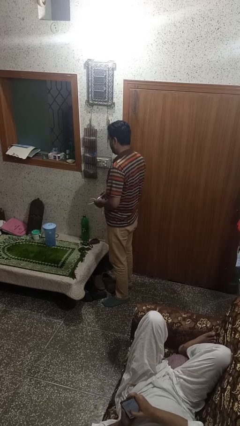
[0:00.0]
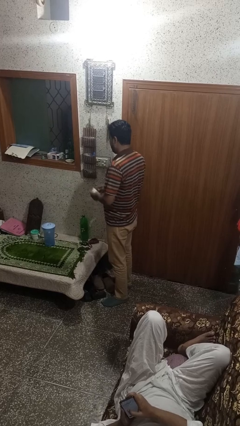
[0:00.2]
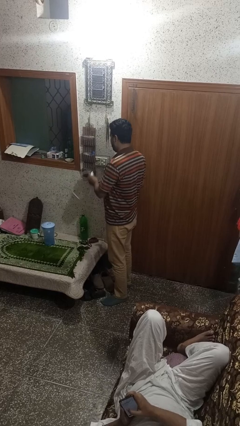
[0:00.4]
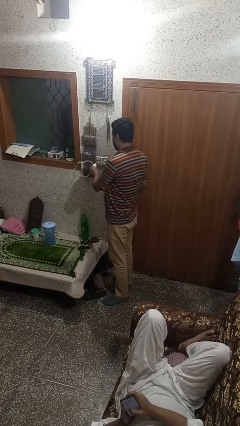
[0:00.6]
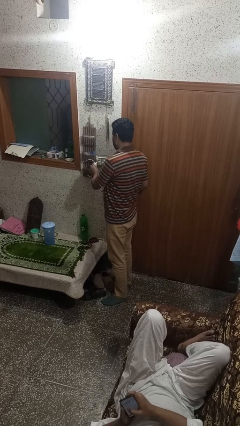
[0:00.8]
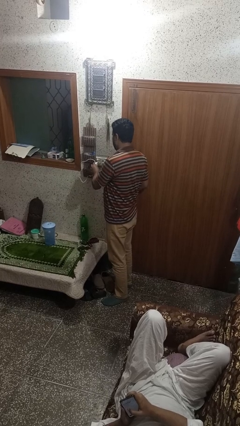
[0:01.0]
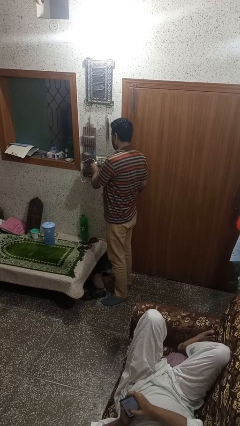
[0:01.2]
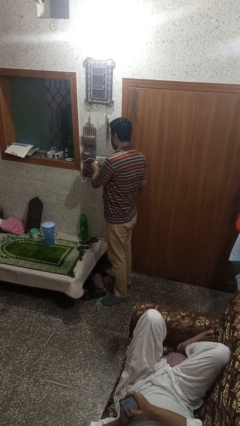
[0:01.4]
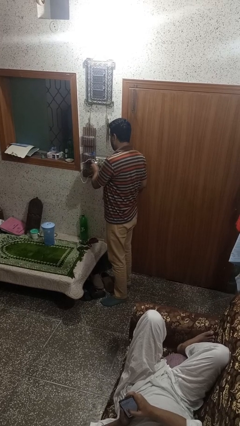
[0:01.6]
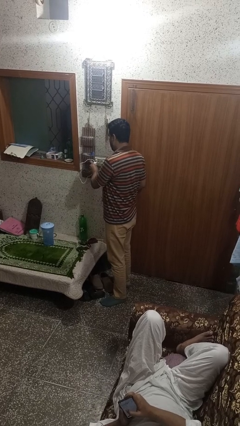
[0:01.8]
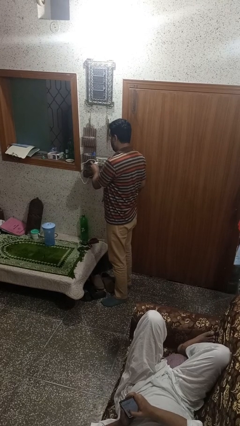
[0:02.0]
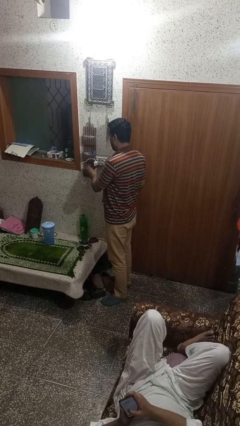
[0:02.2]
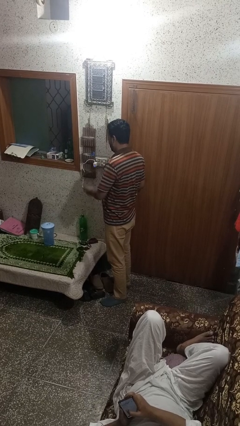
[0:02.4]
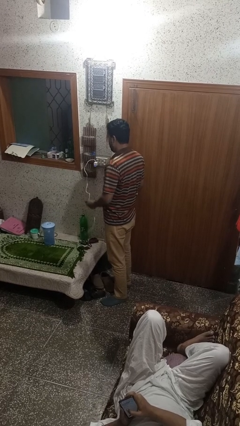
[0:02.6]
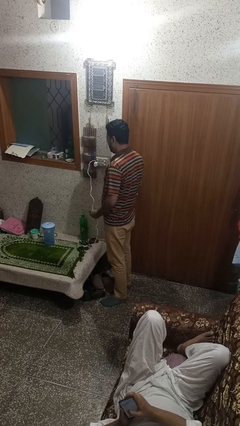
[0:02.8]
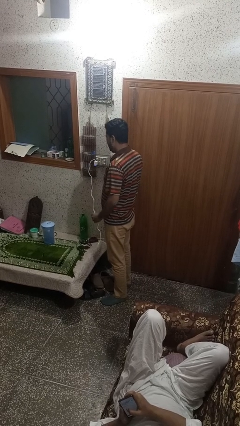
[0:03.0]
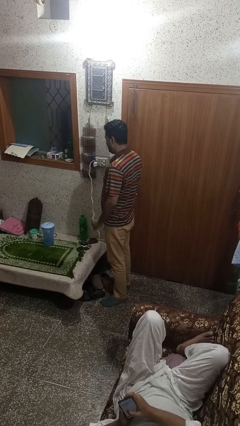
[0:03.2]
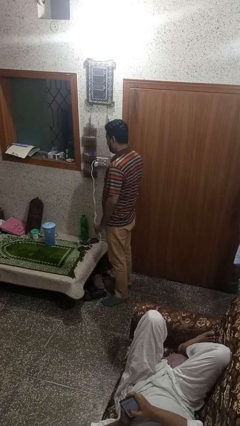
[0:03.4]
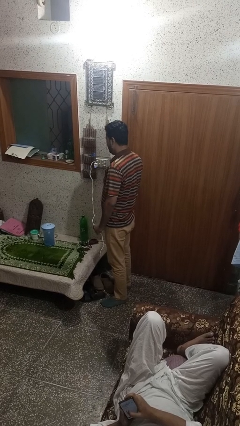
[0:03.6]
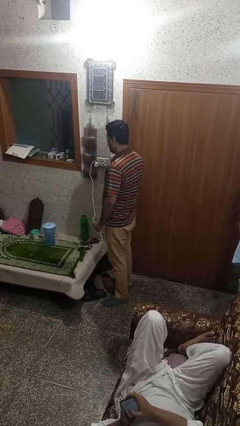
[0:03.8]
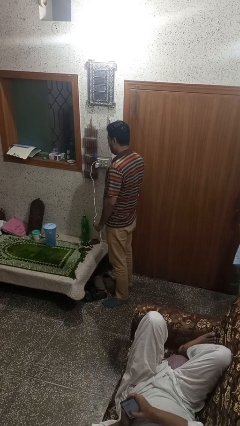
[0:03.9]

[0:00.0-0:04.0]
person plugs into electrical socket

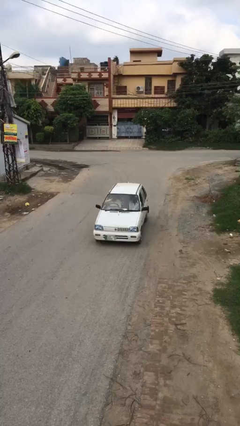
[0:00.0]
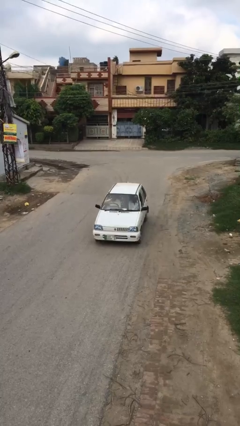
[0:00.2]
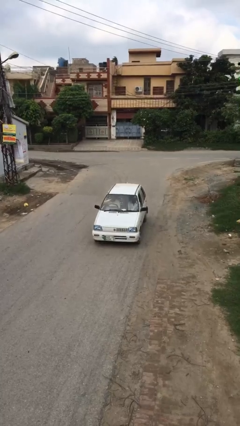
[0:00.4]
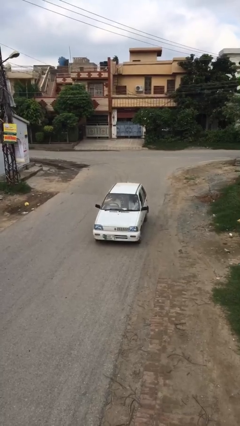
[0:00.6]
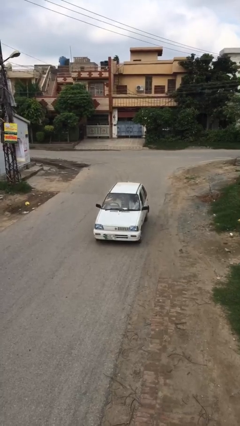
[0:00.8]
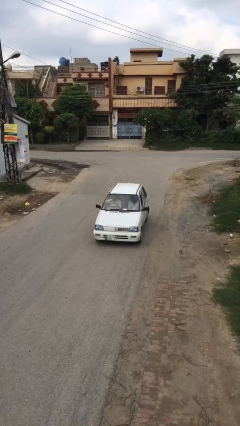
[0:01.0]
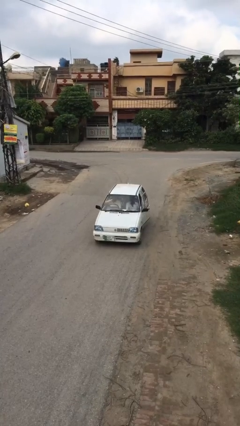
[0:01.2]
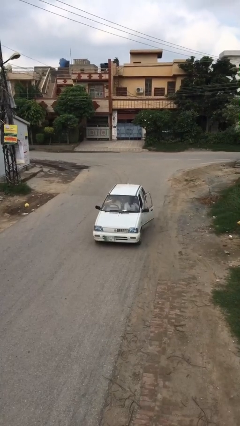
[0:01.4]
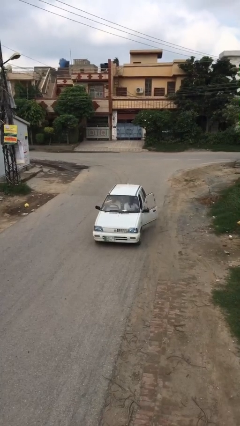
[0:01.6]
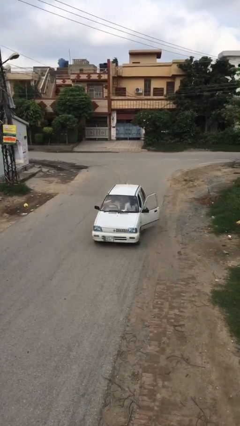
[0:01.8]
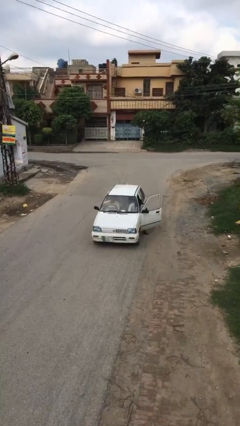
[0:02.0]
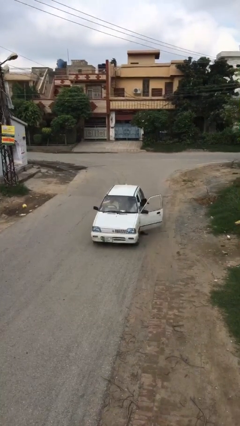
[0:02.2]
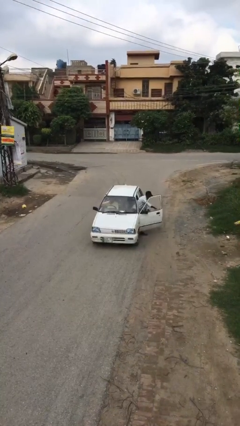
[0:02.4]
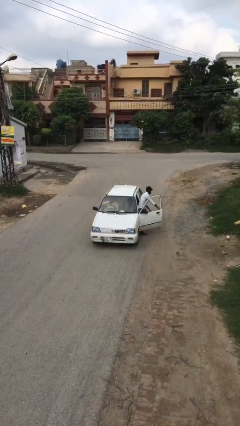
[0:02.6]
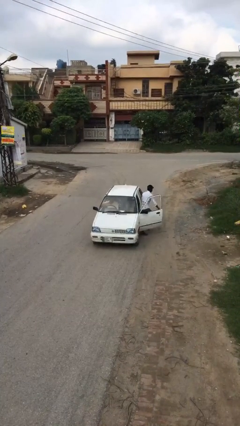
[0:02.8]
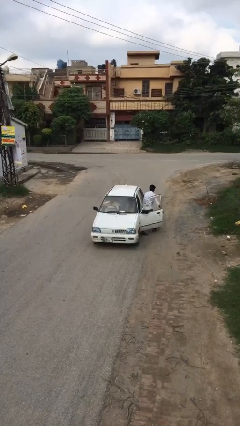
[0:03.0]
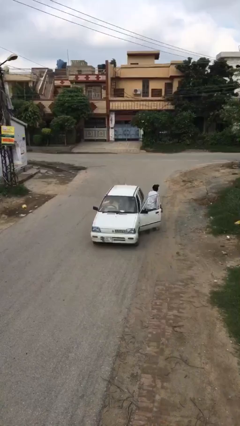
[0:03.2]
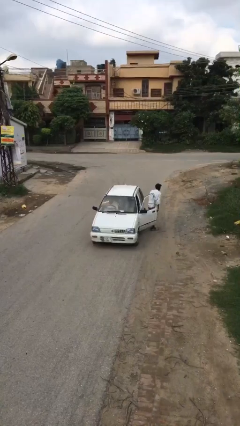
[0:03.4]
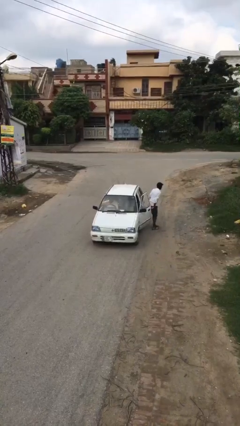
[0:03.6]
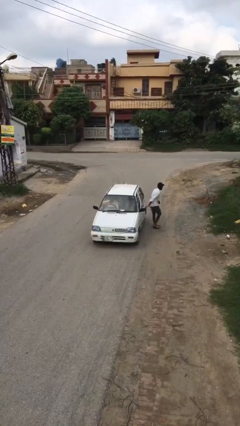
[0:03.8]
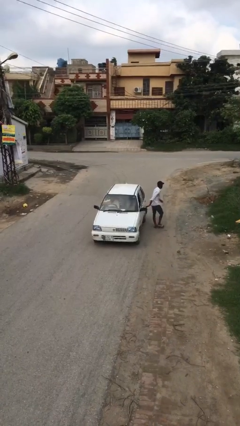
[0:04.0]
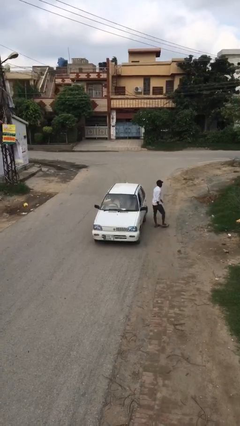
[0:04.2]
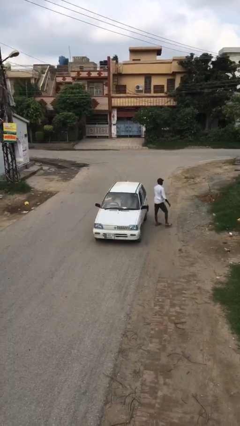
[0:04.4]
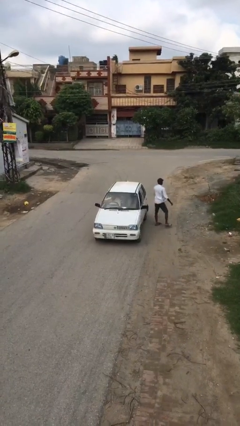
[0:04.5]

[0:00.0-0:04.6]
car drops off person

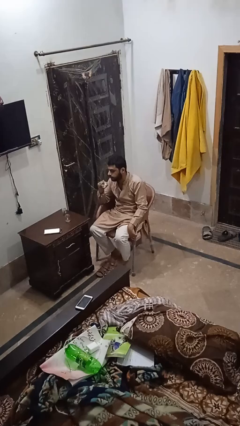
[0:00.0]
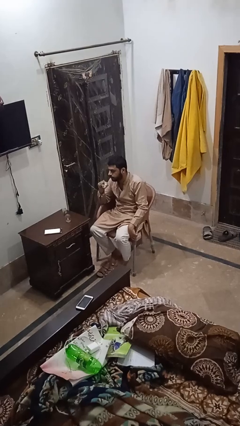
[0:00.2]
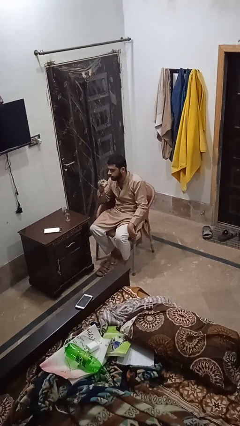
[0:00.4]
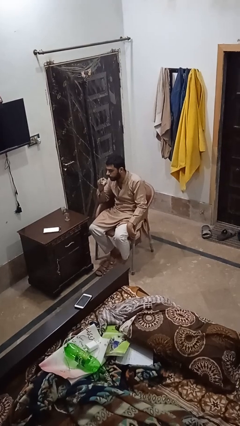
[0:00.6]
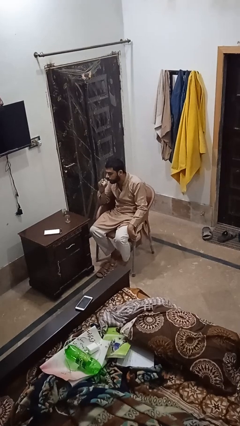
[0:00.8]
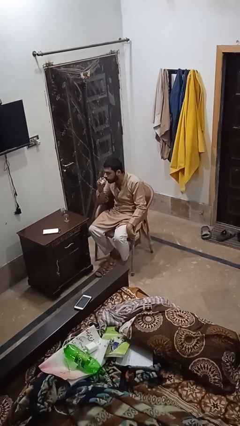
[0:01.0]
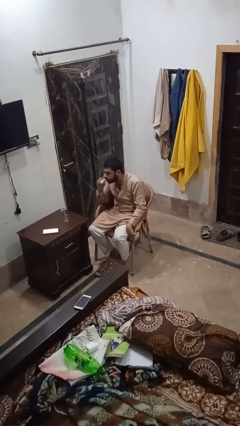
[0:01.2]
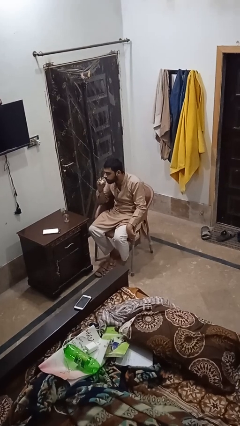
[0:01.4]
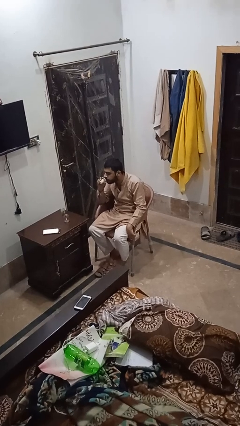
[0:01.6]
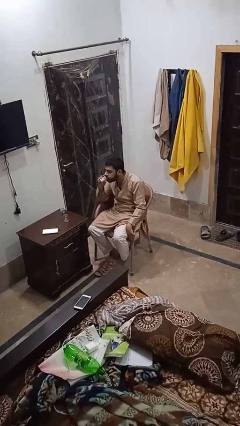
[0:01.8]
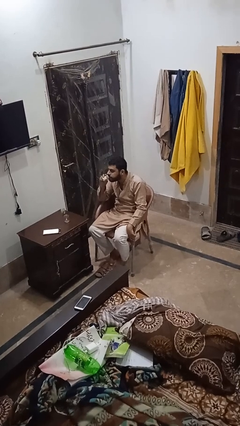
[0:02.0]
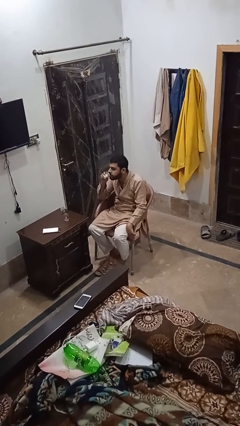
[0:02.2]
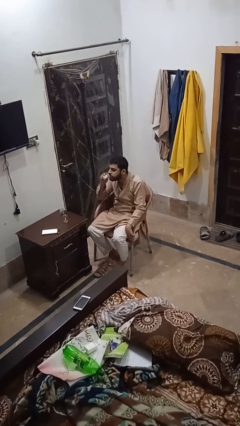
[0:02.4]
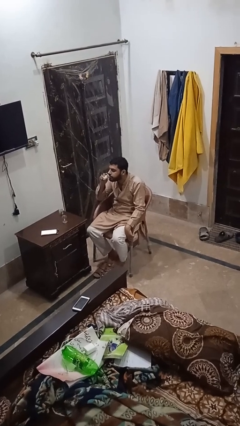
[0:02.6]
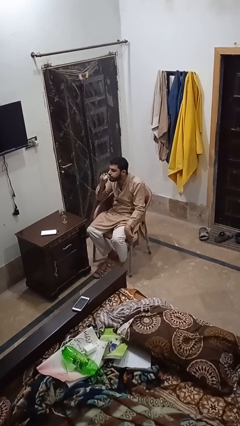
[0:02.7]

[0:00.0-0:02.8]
person drinks from shotglass

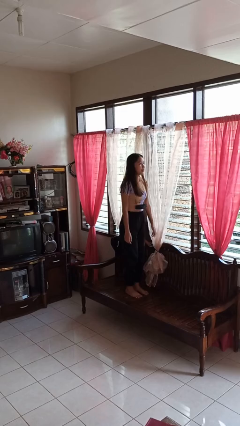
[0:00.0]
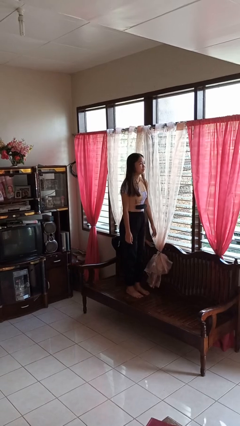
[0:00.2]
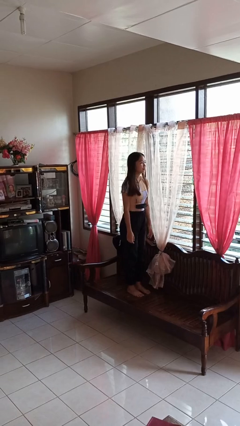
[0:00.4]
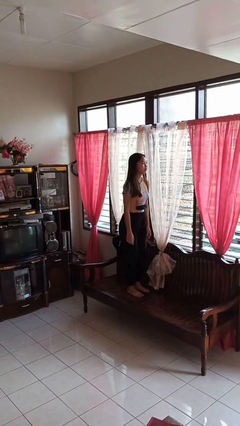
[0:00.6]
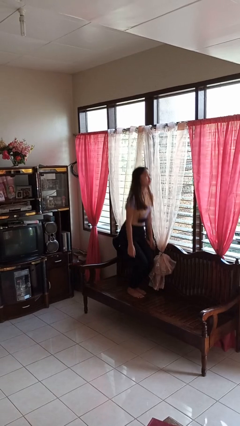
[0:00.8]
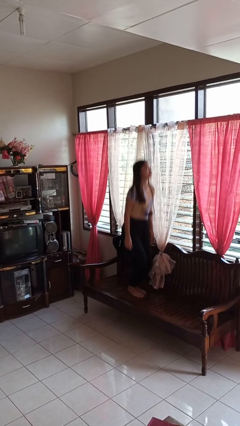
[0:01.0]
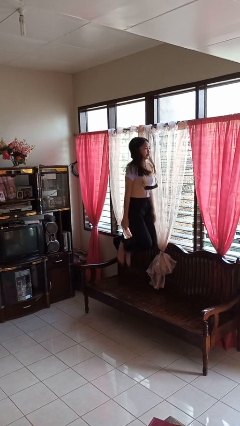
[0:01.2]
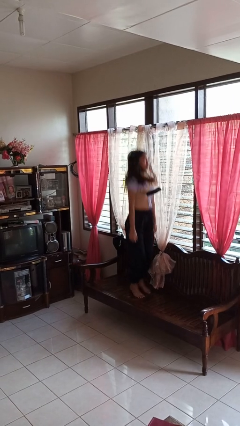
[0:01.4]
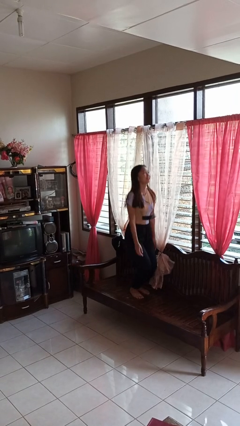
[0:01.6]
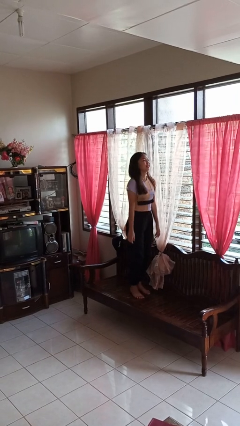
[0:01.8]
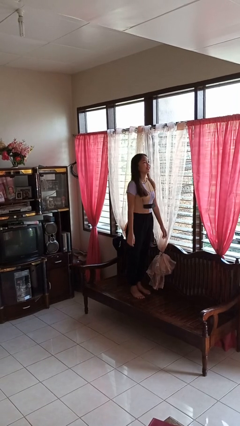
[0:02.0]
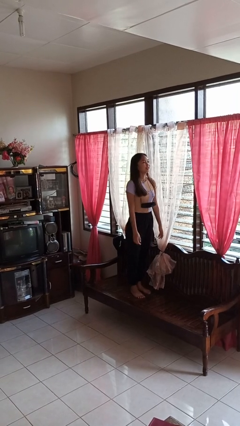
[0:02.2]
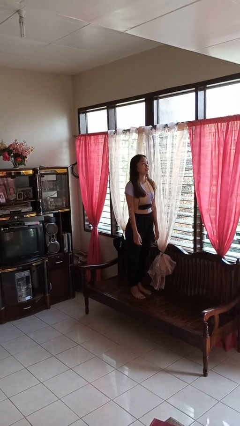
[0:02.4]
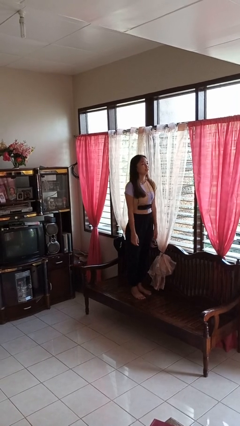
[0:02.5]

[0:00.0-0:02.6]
person jumps on couch

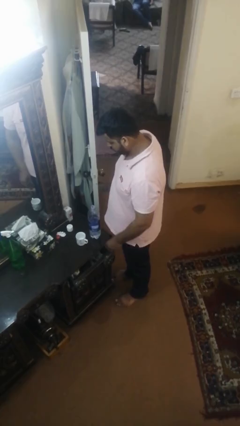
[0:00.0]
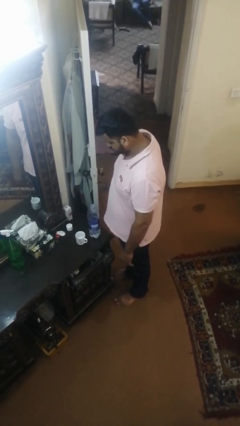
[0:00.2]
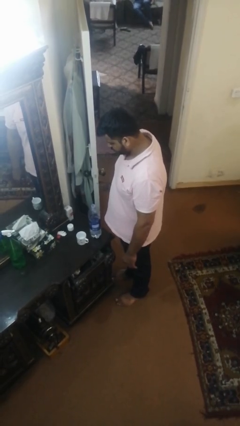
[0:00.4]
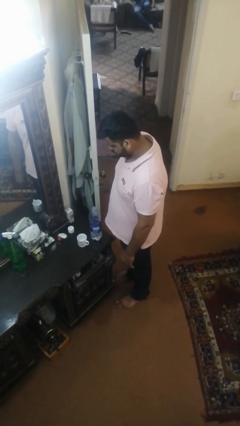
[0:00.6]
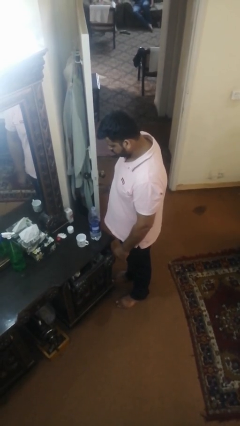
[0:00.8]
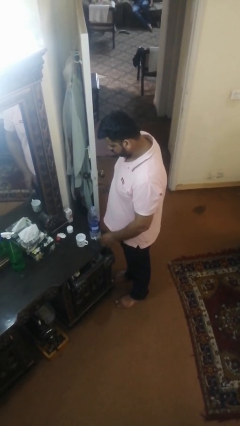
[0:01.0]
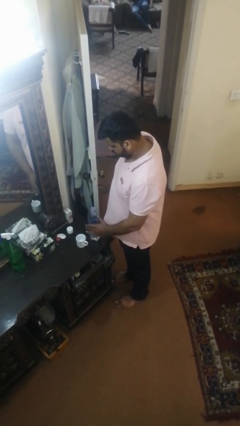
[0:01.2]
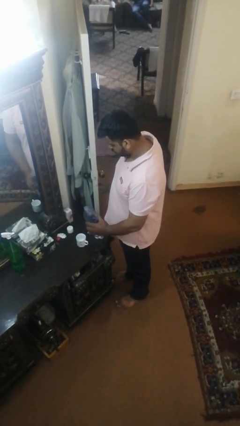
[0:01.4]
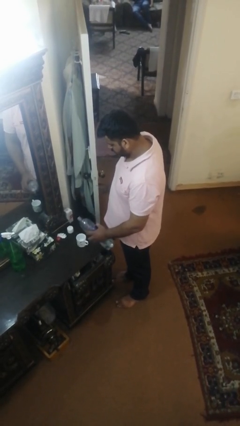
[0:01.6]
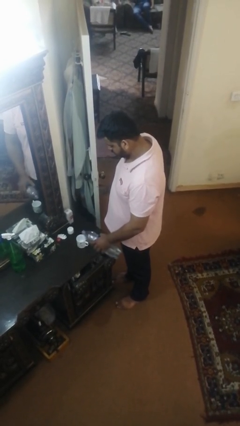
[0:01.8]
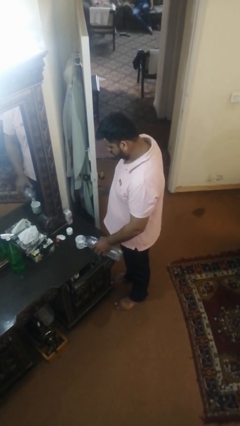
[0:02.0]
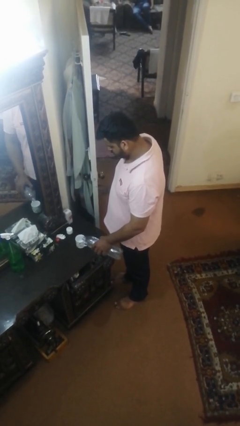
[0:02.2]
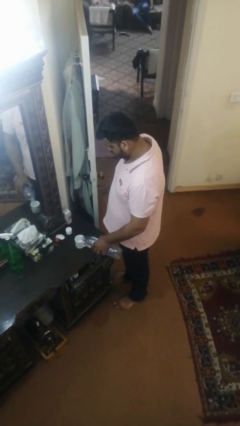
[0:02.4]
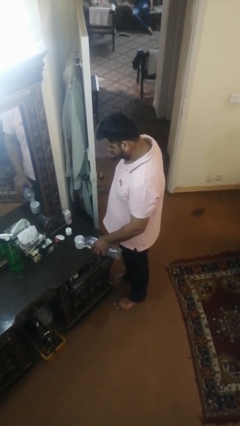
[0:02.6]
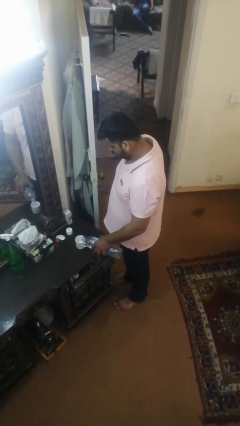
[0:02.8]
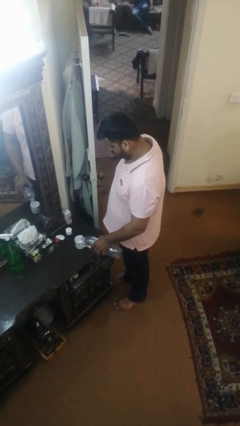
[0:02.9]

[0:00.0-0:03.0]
person pours liquid into cup

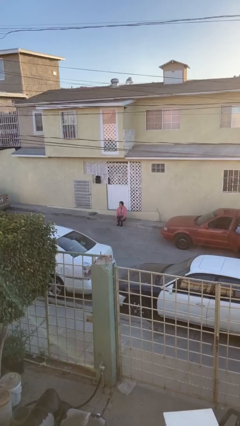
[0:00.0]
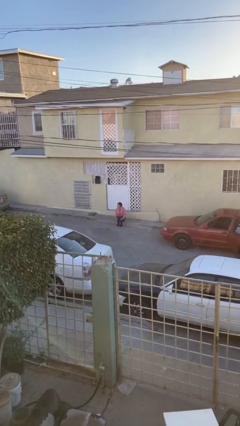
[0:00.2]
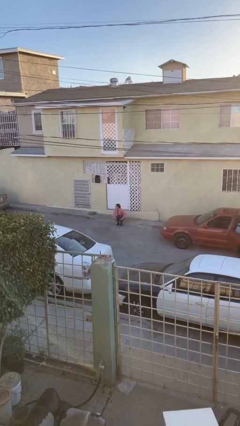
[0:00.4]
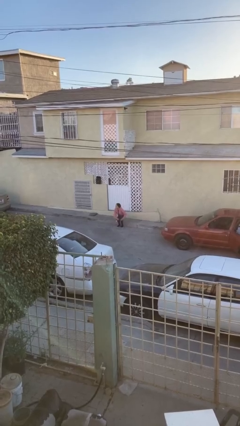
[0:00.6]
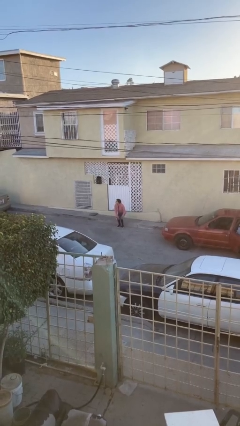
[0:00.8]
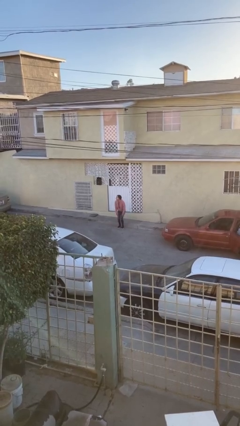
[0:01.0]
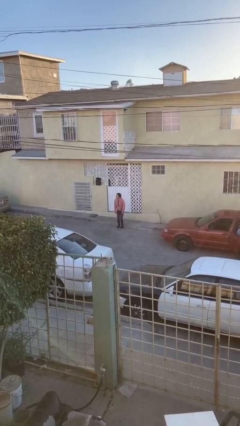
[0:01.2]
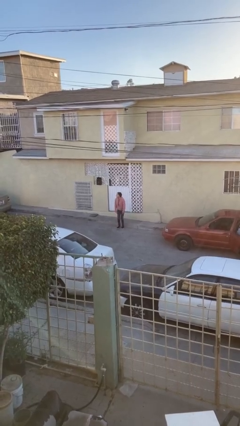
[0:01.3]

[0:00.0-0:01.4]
person stands up
